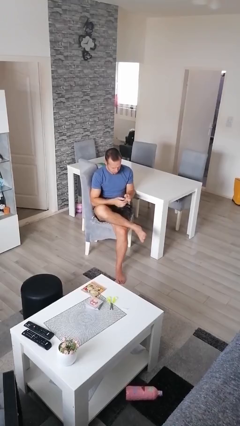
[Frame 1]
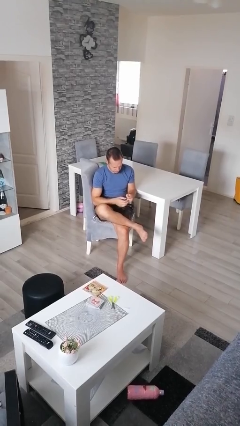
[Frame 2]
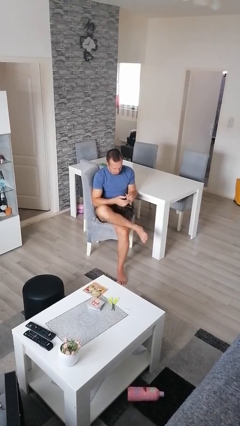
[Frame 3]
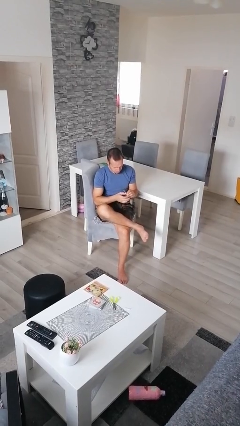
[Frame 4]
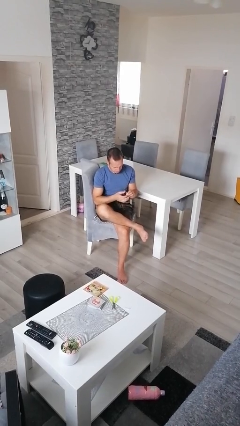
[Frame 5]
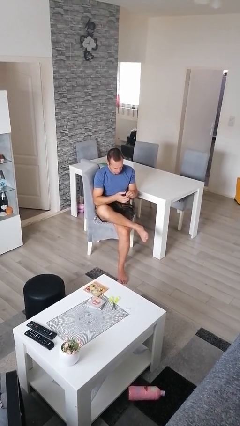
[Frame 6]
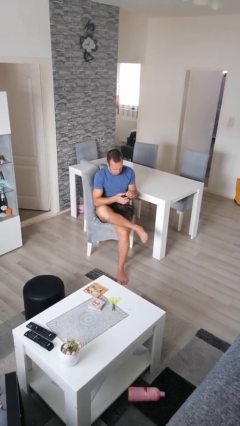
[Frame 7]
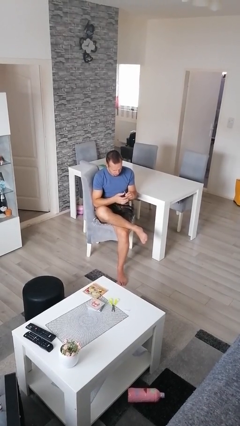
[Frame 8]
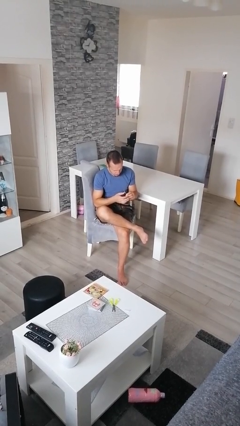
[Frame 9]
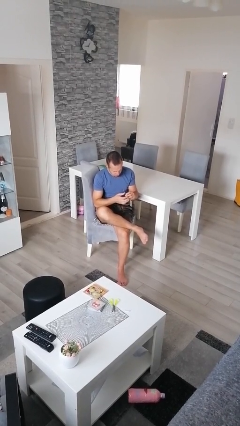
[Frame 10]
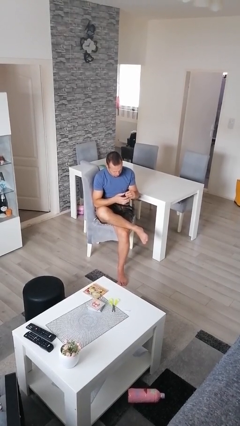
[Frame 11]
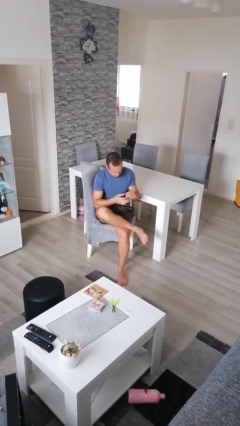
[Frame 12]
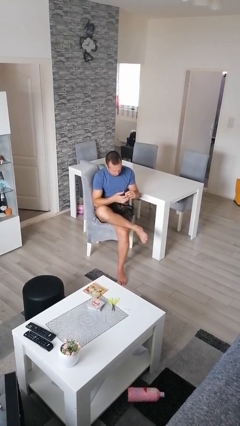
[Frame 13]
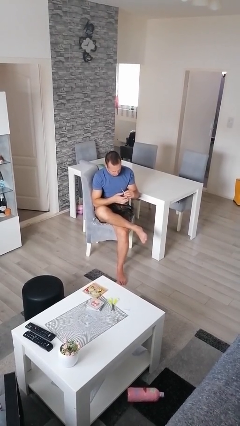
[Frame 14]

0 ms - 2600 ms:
person files fingernails

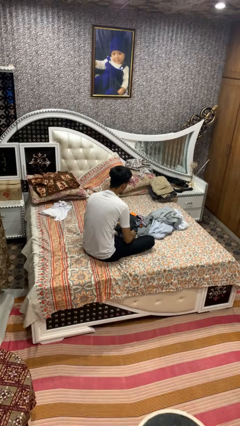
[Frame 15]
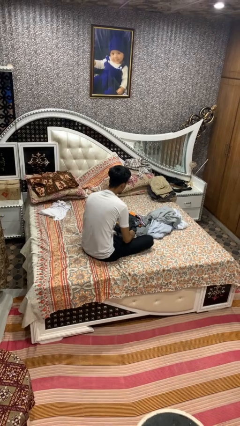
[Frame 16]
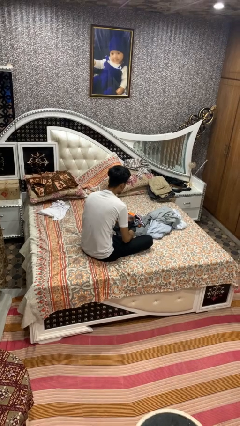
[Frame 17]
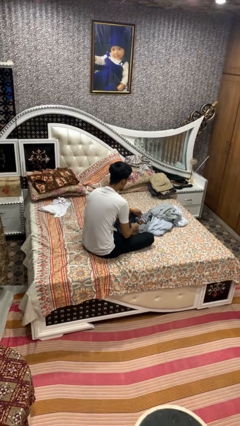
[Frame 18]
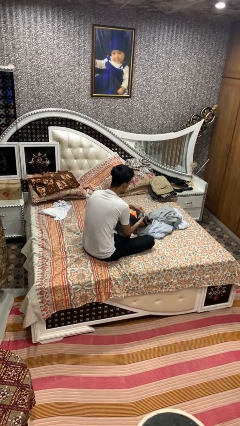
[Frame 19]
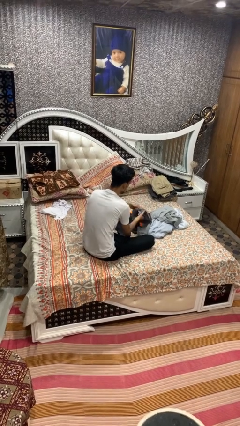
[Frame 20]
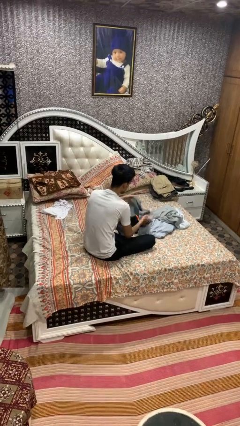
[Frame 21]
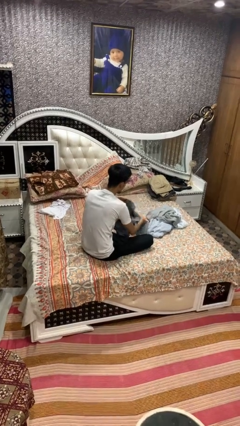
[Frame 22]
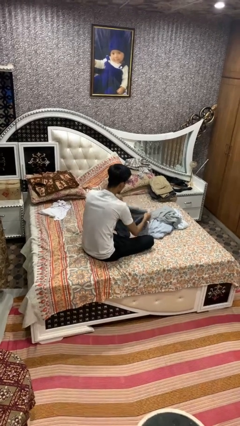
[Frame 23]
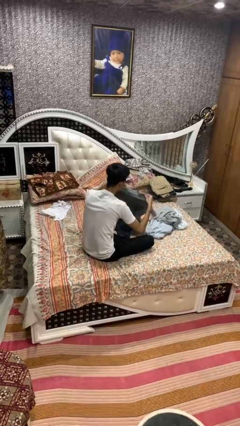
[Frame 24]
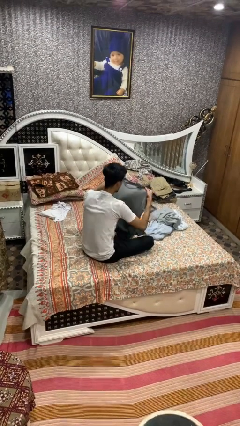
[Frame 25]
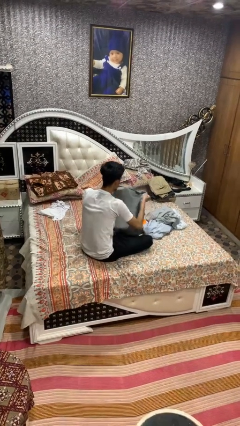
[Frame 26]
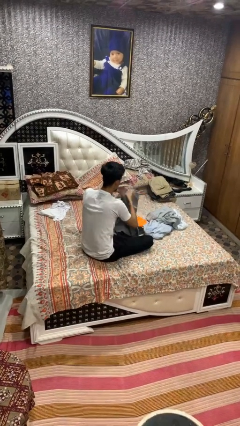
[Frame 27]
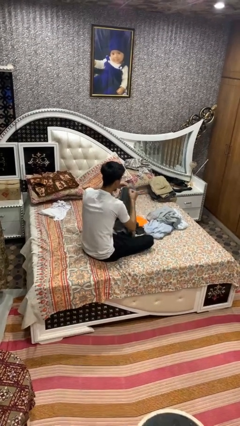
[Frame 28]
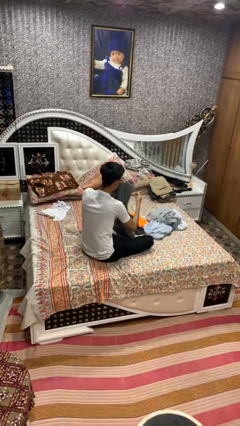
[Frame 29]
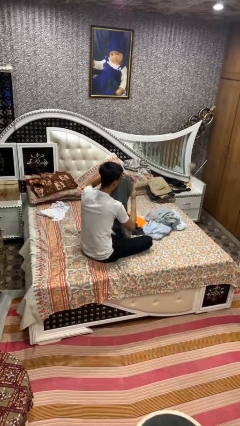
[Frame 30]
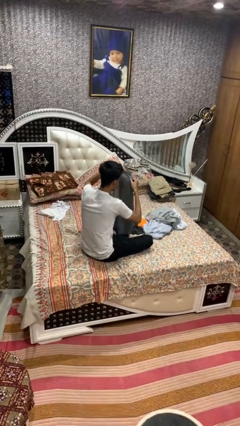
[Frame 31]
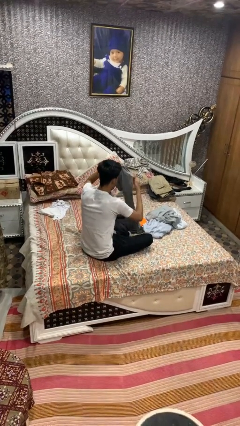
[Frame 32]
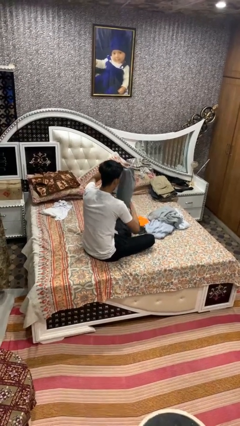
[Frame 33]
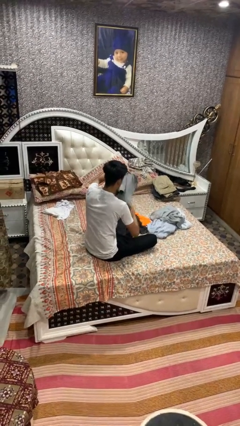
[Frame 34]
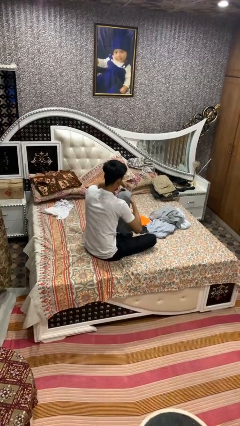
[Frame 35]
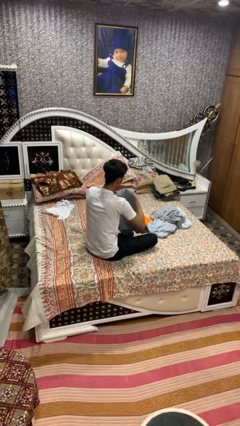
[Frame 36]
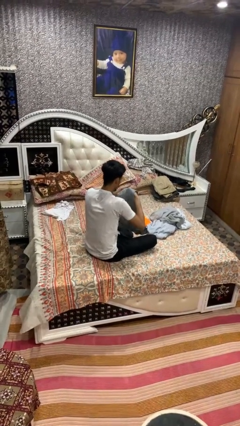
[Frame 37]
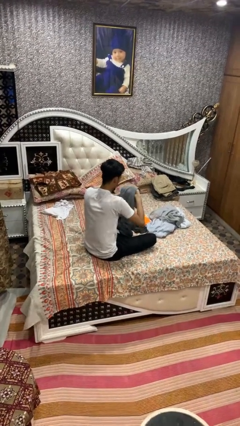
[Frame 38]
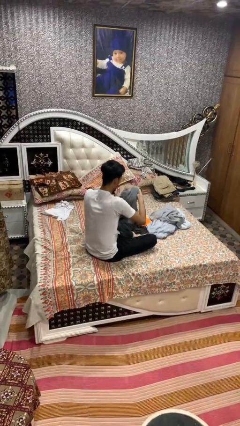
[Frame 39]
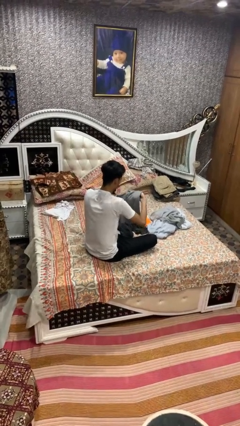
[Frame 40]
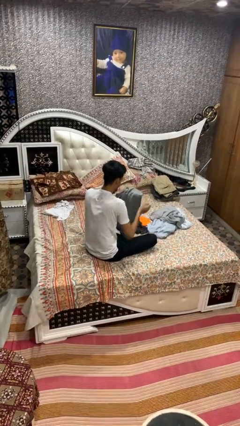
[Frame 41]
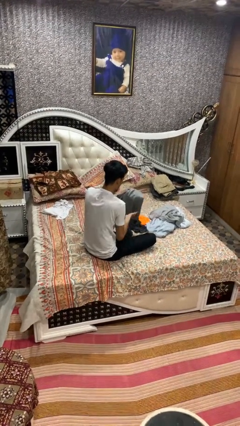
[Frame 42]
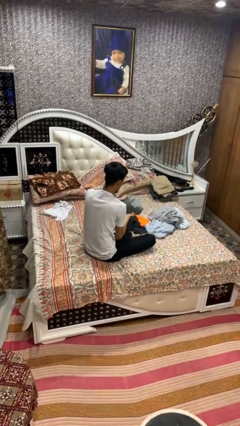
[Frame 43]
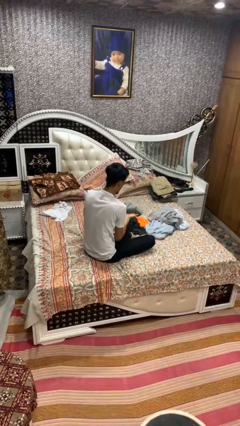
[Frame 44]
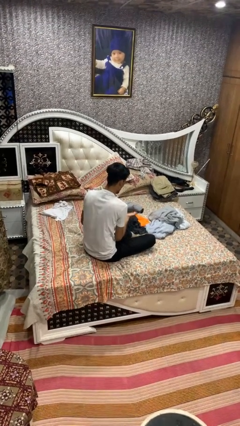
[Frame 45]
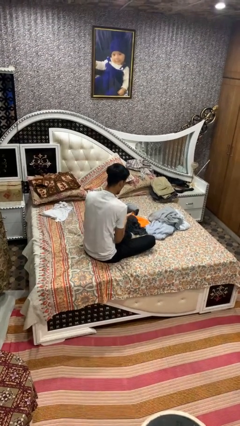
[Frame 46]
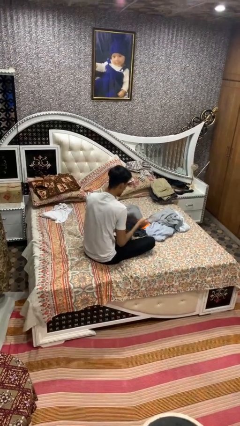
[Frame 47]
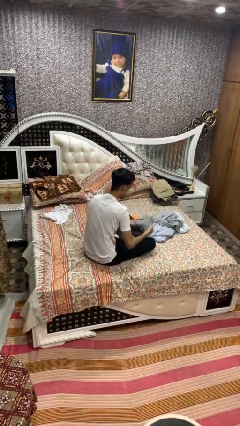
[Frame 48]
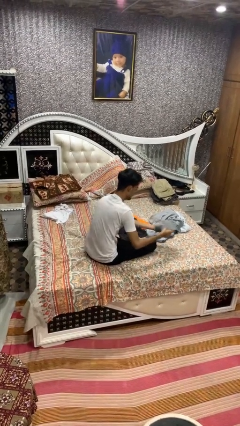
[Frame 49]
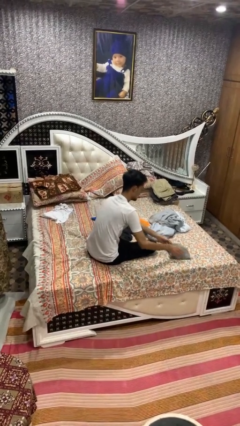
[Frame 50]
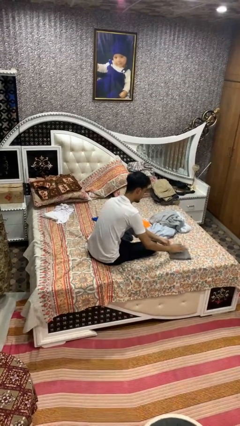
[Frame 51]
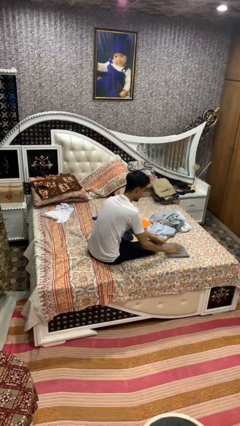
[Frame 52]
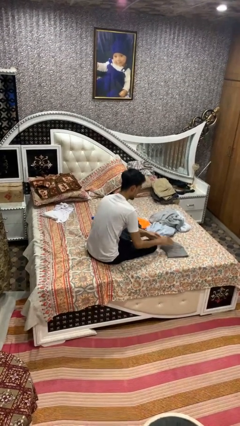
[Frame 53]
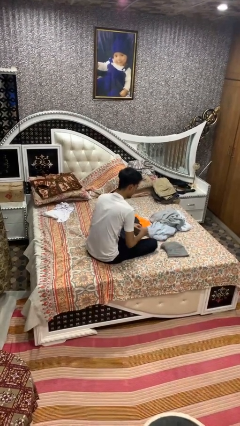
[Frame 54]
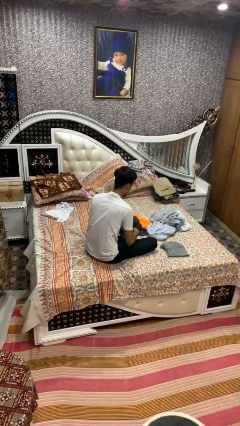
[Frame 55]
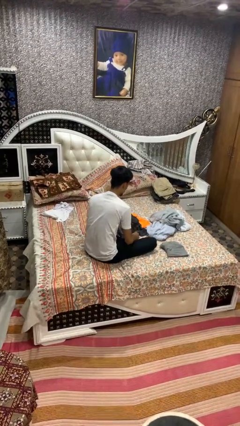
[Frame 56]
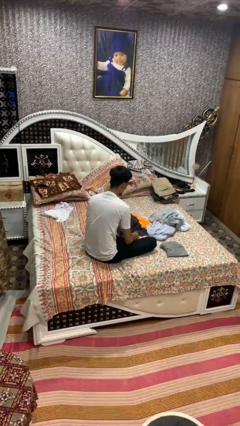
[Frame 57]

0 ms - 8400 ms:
person folds shirt

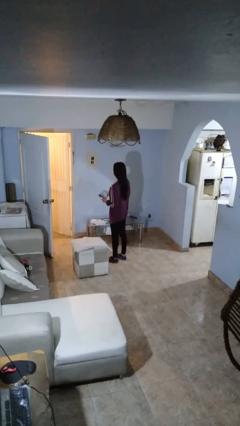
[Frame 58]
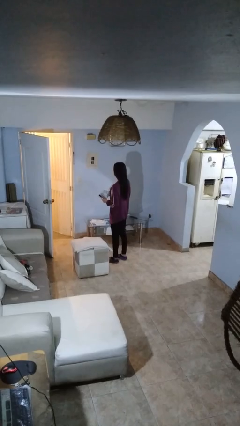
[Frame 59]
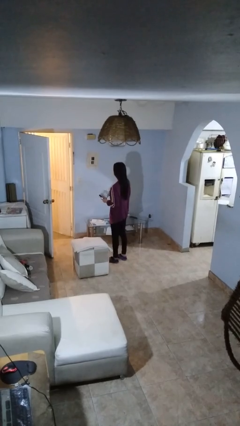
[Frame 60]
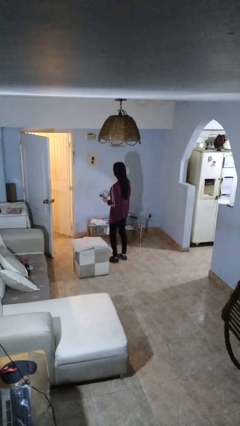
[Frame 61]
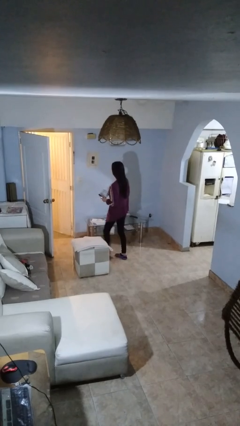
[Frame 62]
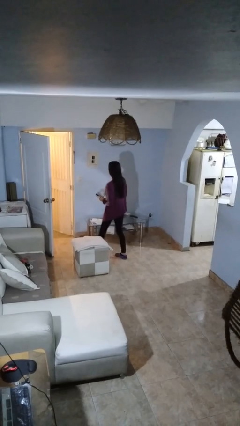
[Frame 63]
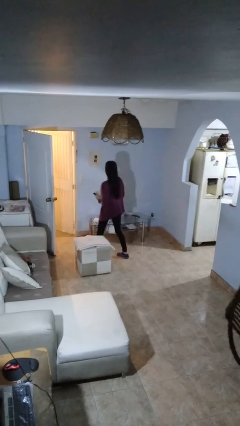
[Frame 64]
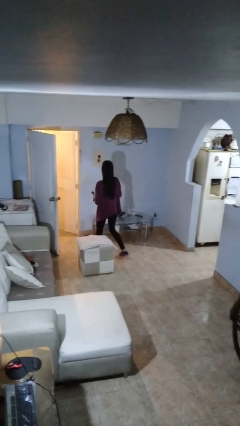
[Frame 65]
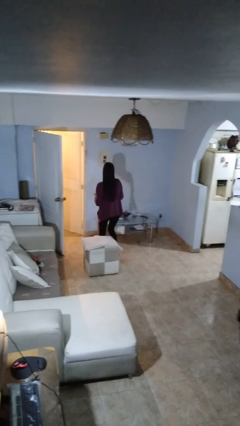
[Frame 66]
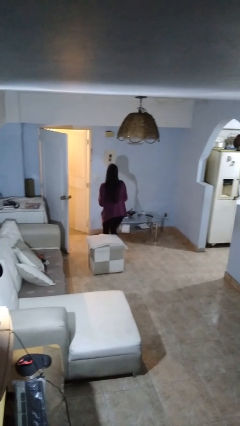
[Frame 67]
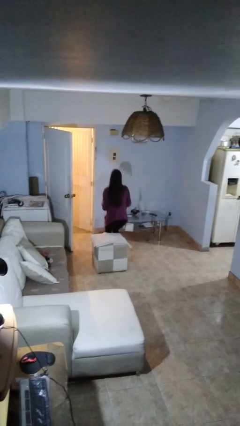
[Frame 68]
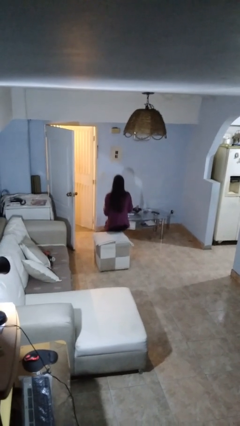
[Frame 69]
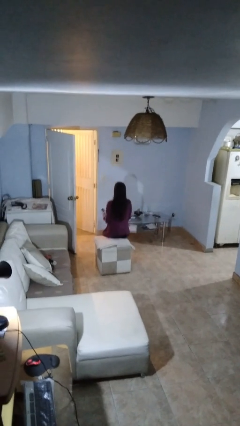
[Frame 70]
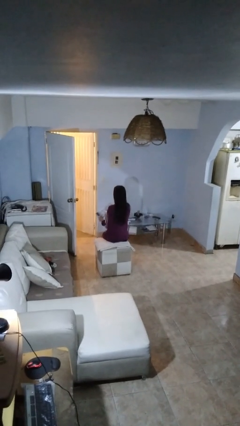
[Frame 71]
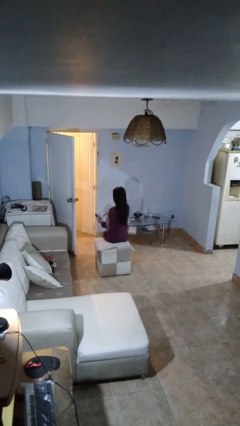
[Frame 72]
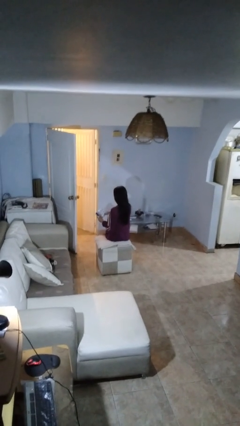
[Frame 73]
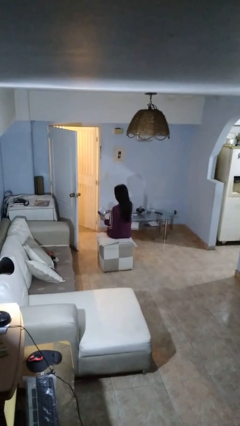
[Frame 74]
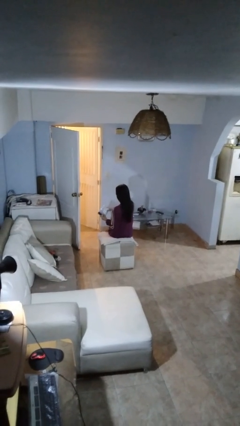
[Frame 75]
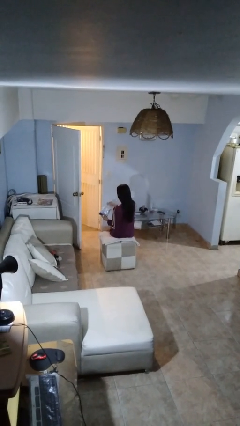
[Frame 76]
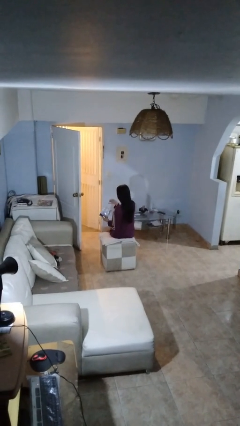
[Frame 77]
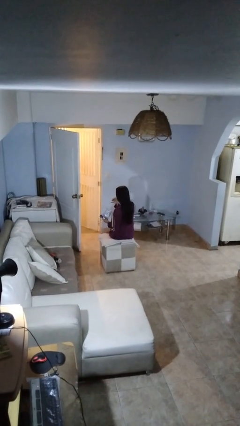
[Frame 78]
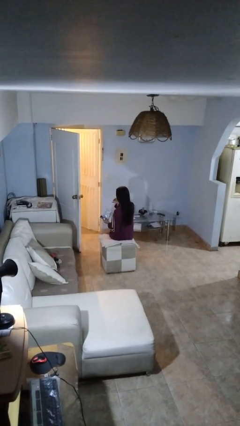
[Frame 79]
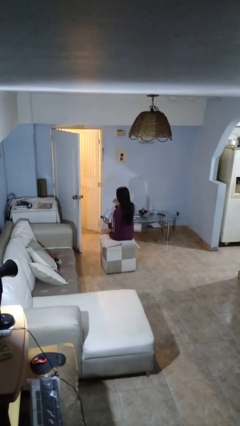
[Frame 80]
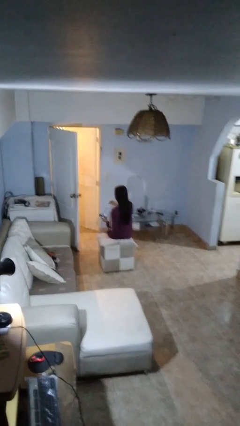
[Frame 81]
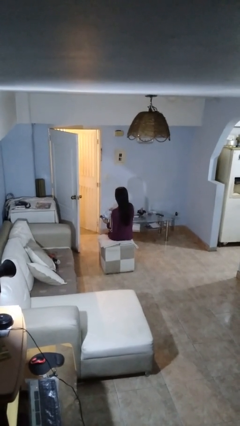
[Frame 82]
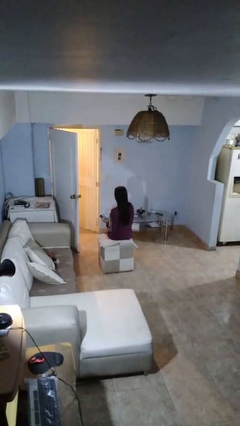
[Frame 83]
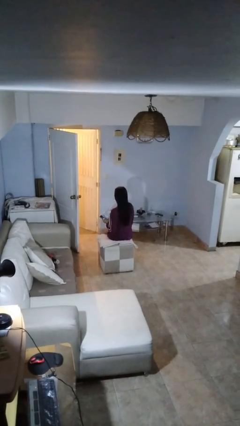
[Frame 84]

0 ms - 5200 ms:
person eats snack from bag

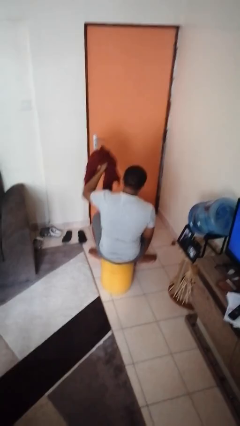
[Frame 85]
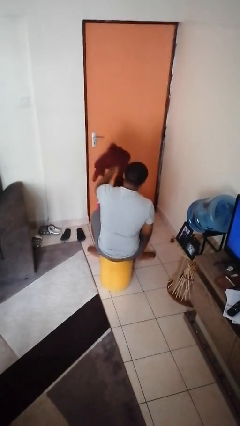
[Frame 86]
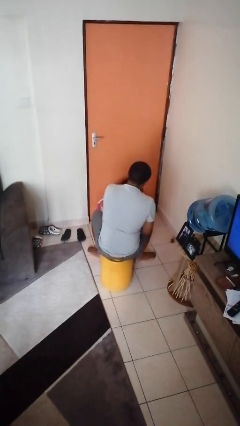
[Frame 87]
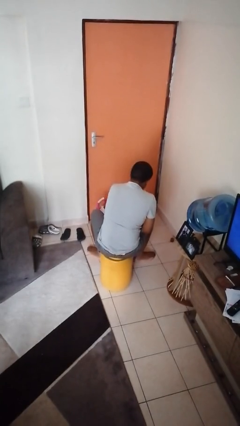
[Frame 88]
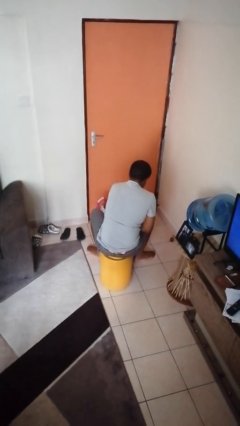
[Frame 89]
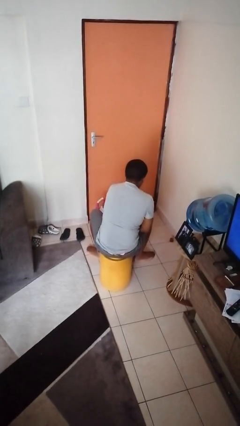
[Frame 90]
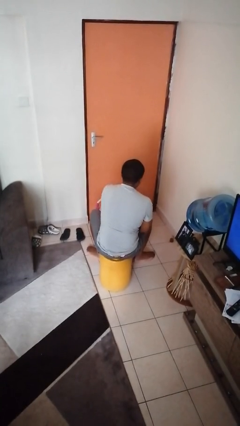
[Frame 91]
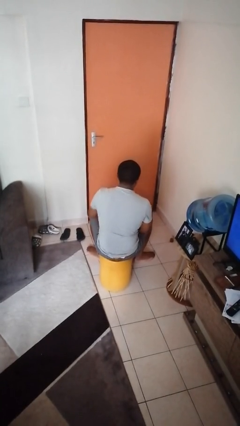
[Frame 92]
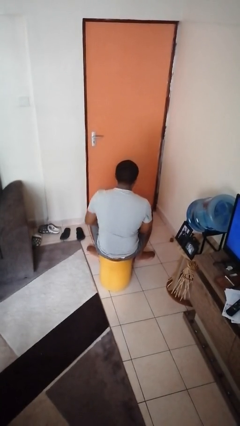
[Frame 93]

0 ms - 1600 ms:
person puts object into basket
